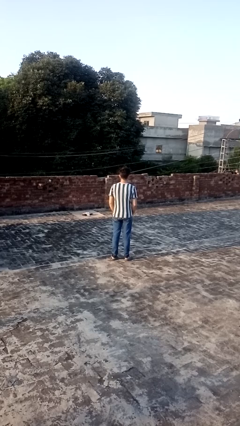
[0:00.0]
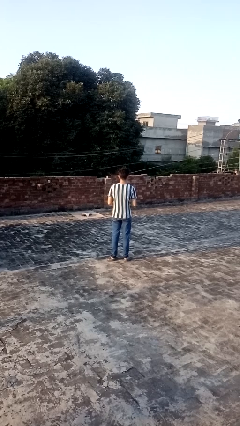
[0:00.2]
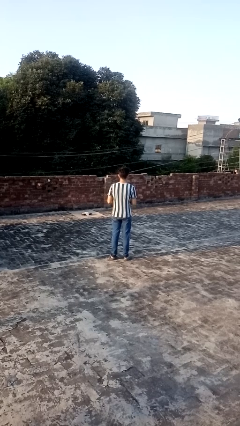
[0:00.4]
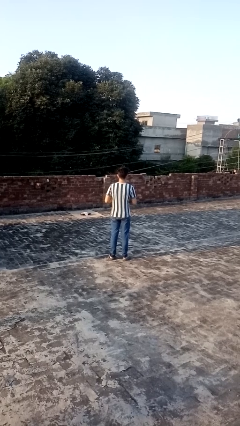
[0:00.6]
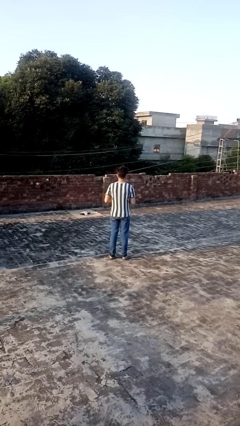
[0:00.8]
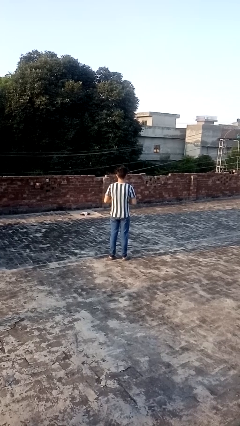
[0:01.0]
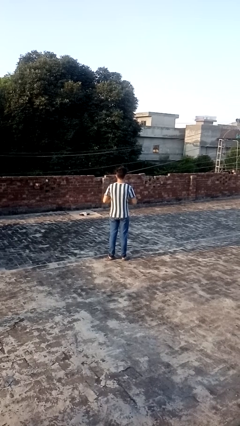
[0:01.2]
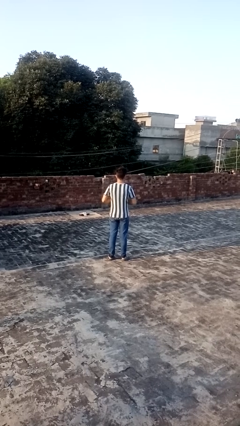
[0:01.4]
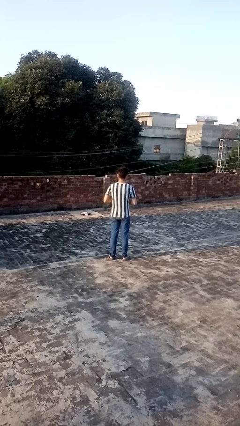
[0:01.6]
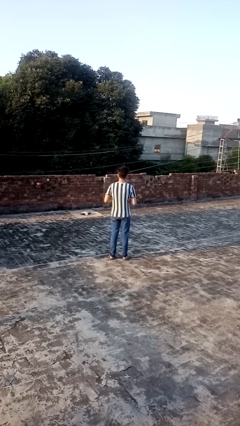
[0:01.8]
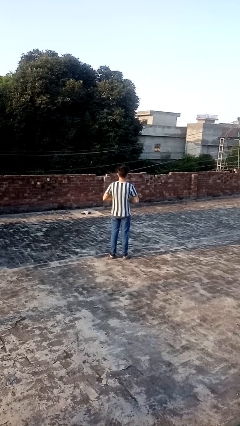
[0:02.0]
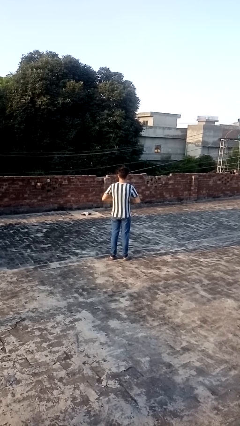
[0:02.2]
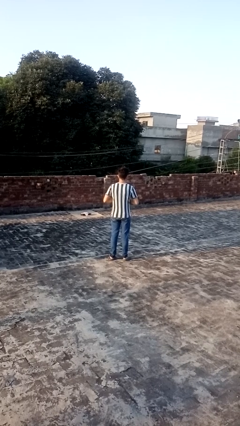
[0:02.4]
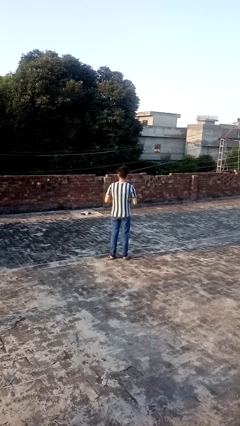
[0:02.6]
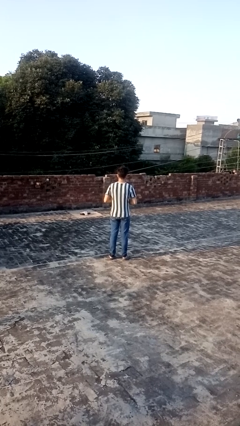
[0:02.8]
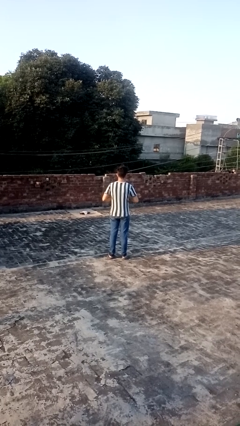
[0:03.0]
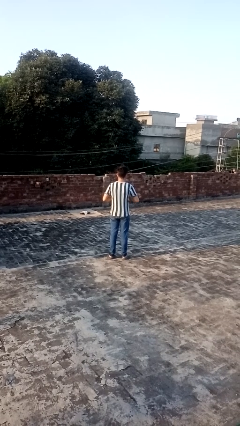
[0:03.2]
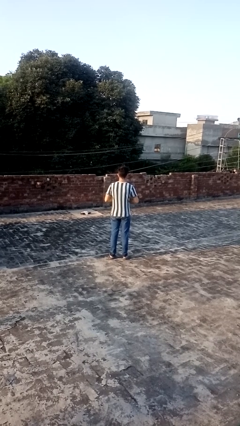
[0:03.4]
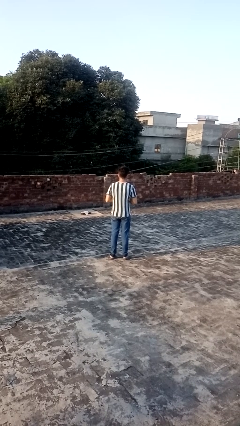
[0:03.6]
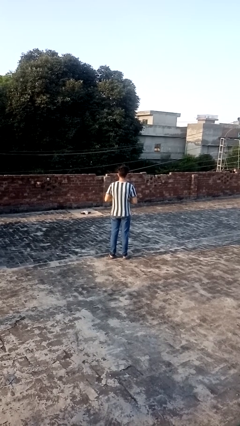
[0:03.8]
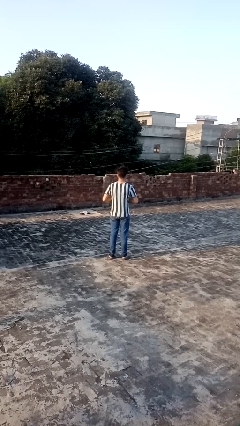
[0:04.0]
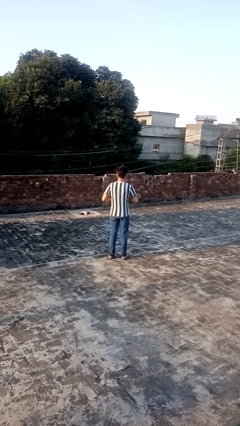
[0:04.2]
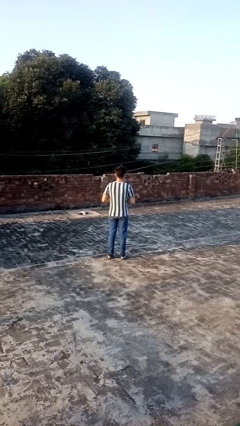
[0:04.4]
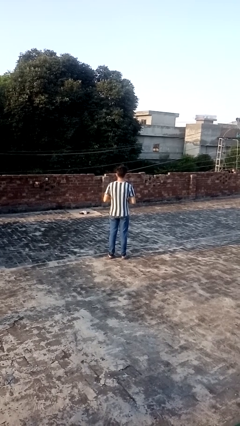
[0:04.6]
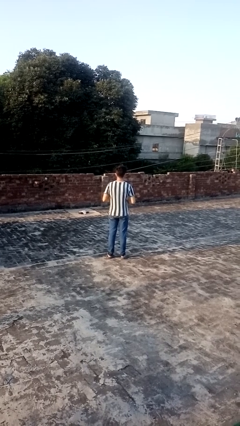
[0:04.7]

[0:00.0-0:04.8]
person cracks knuckles

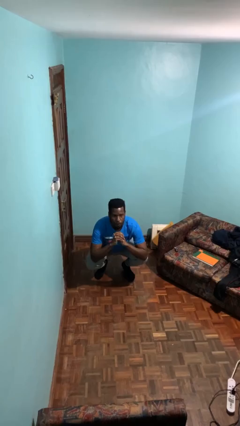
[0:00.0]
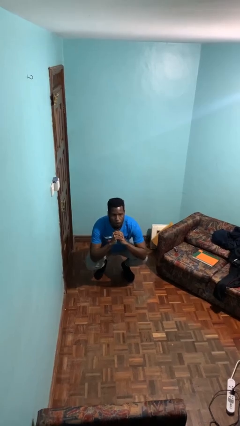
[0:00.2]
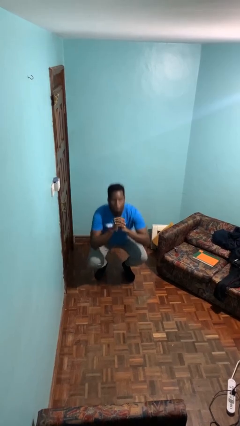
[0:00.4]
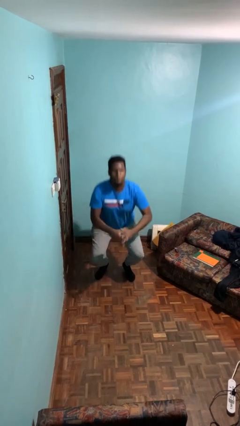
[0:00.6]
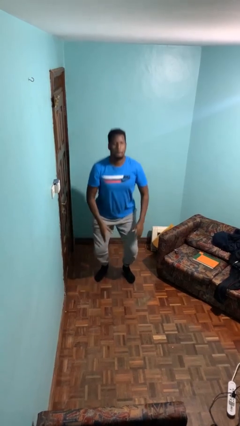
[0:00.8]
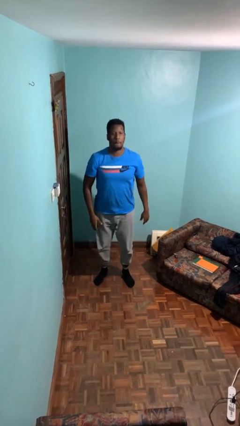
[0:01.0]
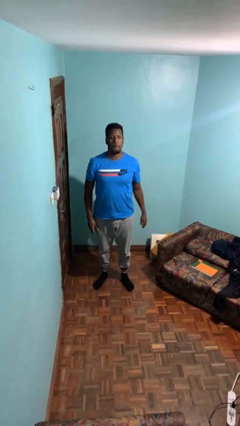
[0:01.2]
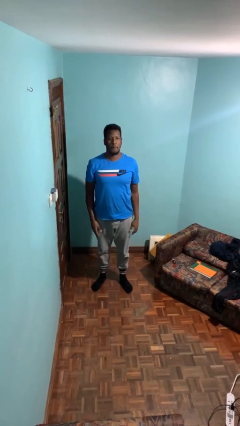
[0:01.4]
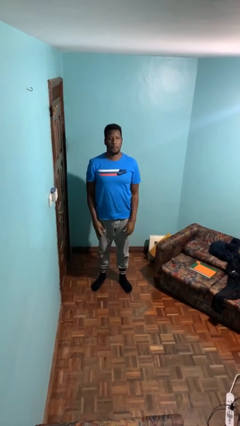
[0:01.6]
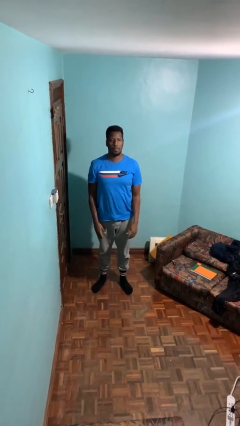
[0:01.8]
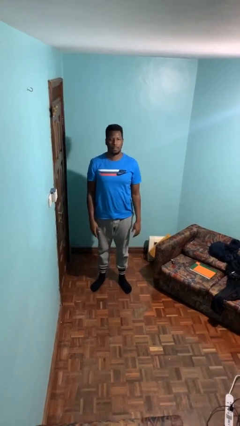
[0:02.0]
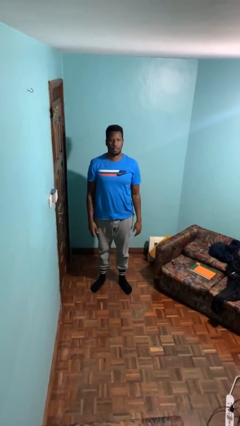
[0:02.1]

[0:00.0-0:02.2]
person stands up

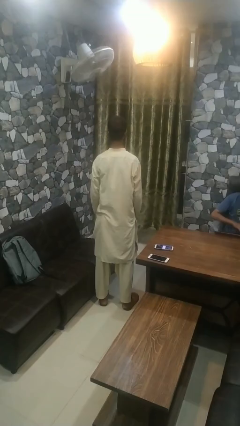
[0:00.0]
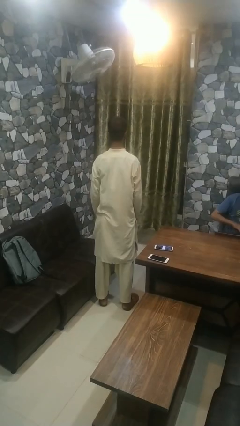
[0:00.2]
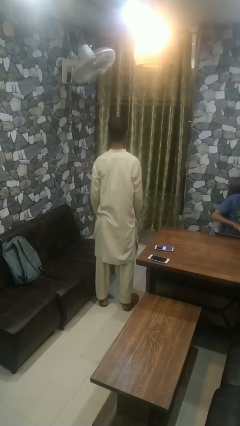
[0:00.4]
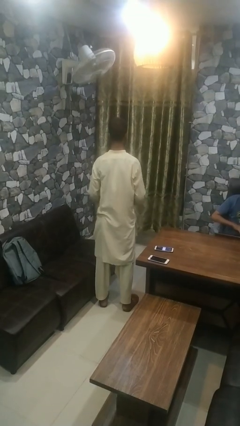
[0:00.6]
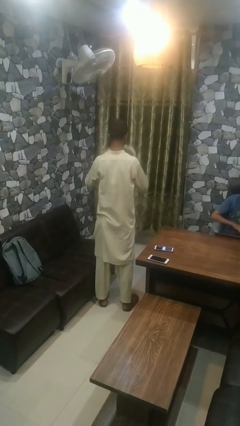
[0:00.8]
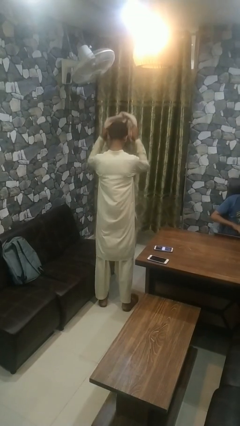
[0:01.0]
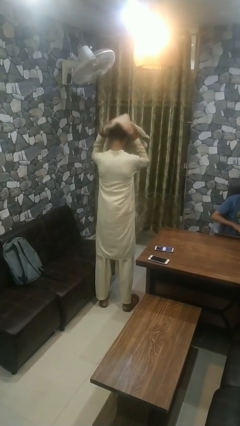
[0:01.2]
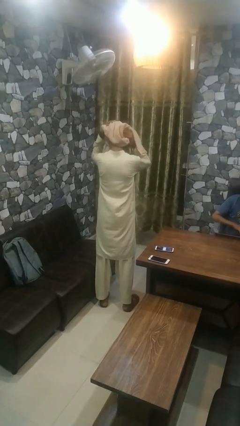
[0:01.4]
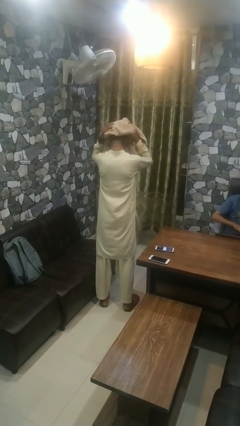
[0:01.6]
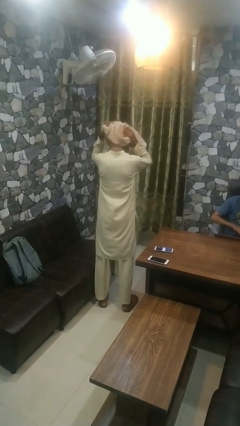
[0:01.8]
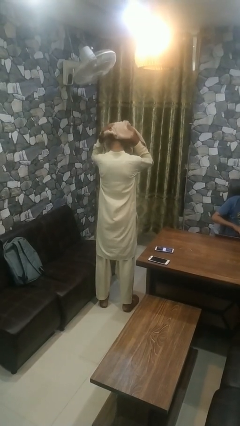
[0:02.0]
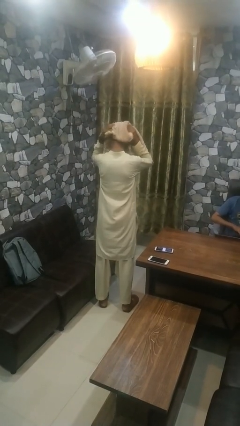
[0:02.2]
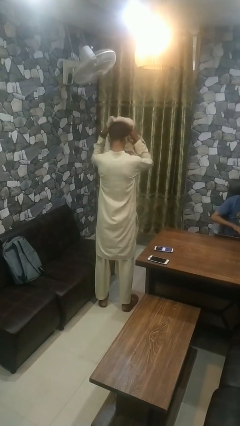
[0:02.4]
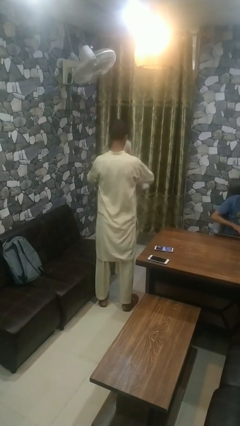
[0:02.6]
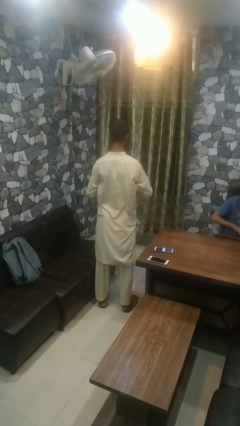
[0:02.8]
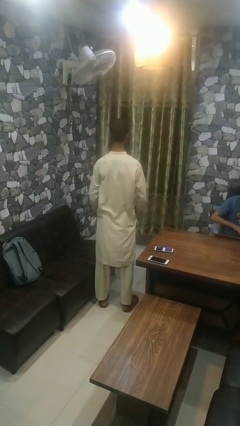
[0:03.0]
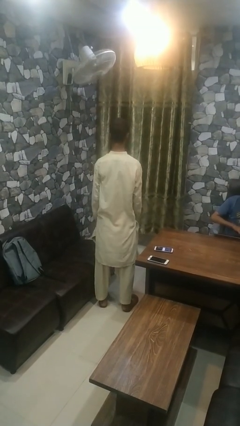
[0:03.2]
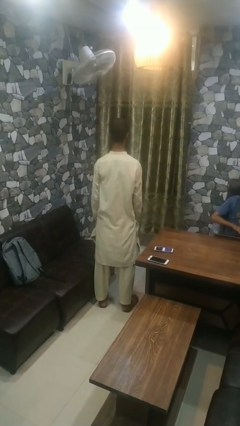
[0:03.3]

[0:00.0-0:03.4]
person dries hair with towel

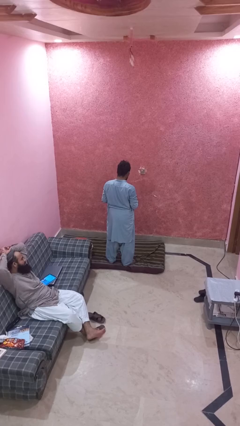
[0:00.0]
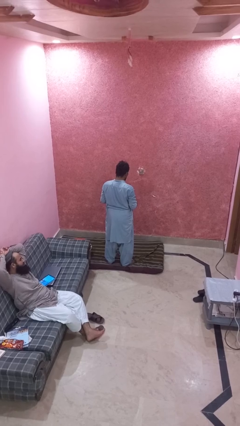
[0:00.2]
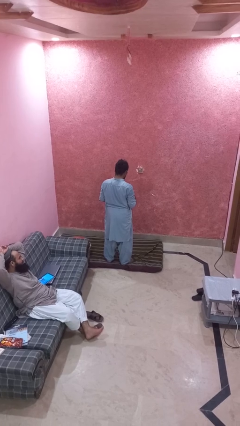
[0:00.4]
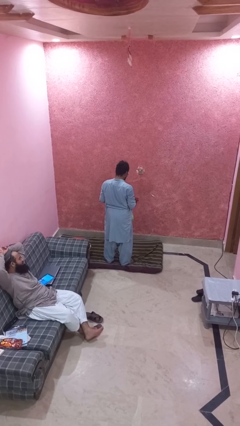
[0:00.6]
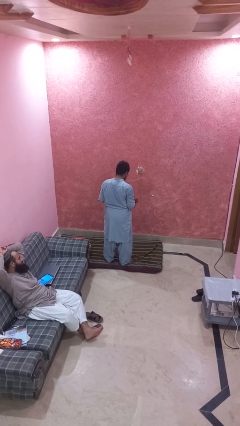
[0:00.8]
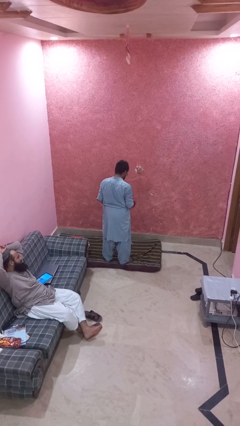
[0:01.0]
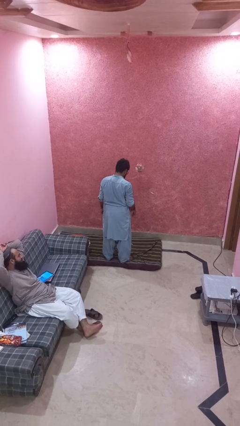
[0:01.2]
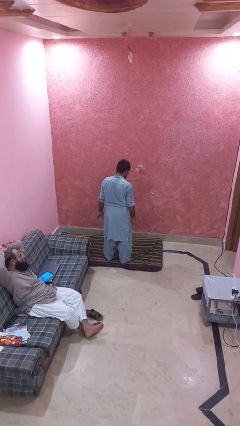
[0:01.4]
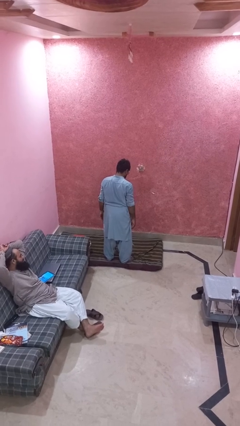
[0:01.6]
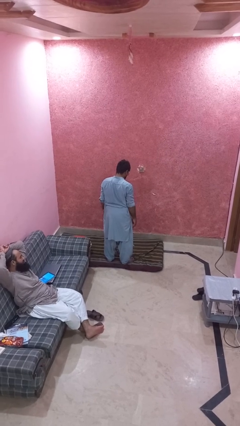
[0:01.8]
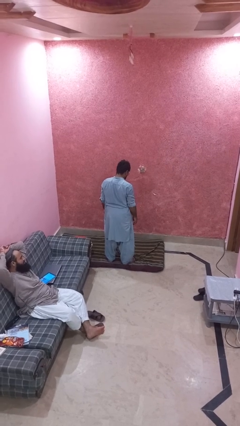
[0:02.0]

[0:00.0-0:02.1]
person drops object

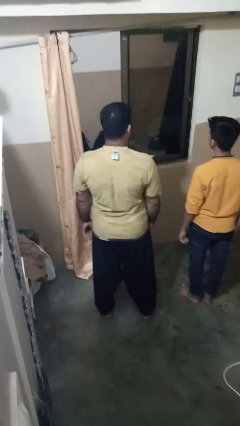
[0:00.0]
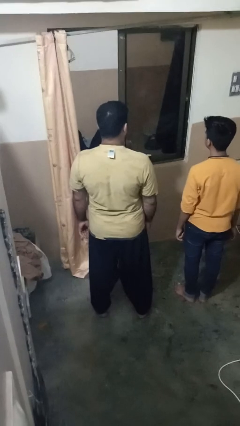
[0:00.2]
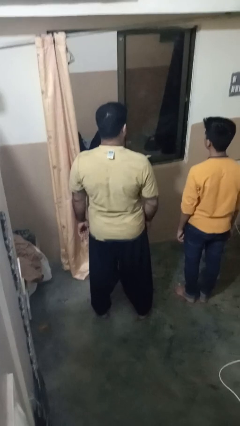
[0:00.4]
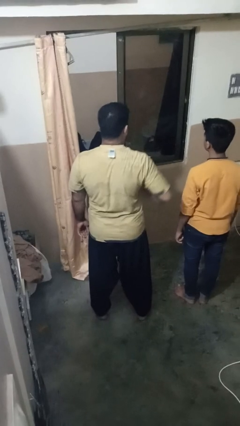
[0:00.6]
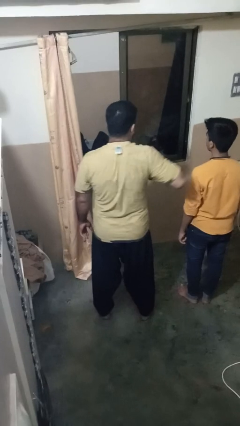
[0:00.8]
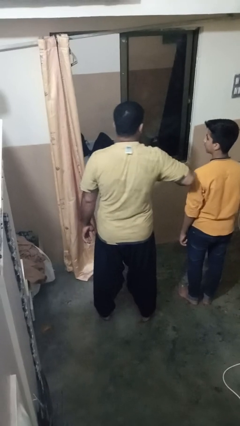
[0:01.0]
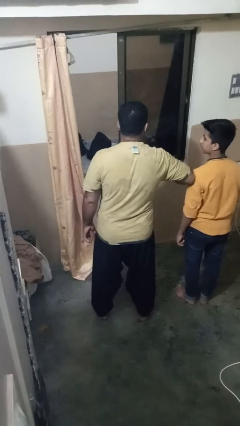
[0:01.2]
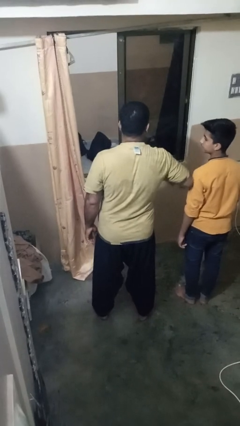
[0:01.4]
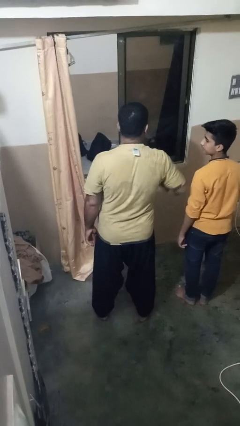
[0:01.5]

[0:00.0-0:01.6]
person nudges person with elbow

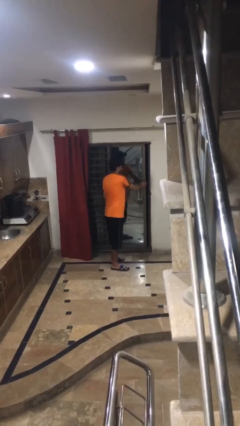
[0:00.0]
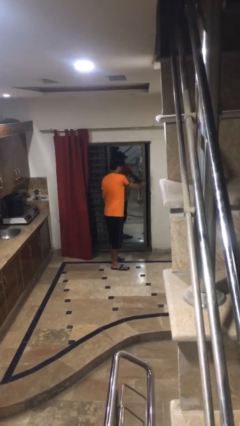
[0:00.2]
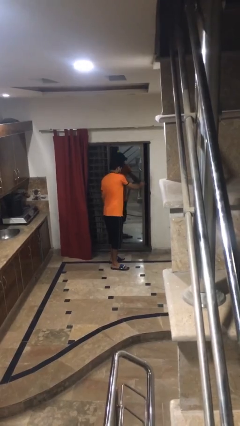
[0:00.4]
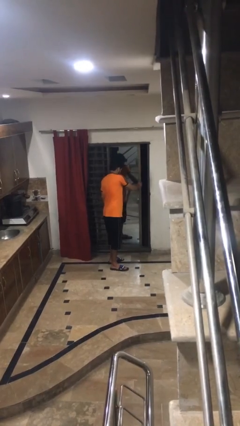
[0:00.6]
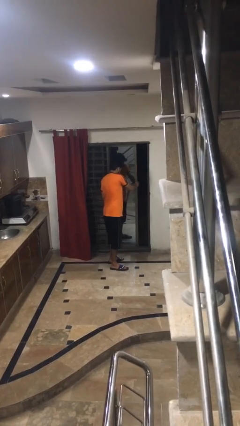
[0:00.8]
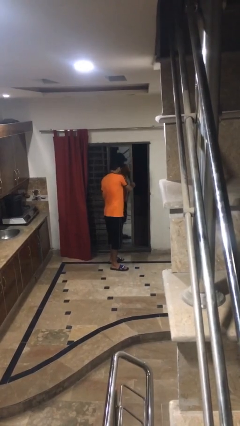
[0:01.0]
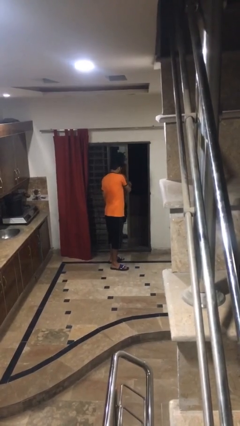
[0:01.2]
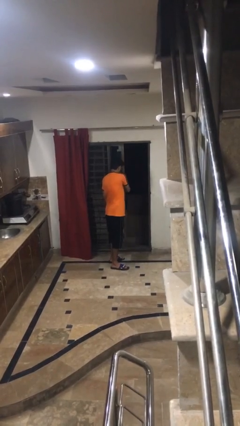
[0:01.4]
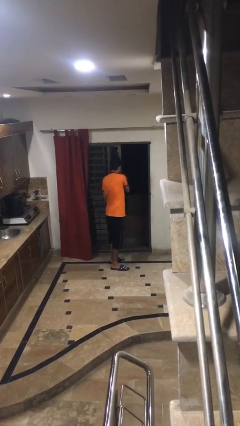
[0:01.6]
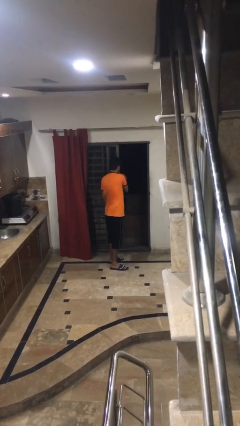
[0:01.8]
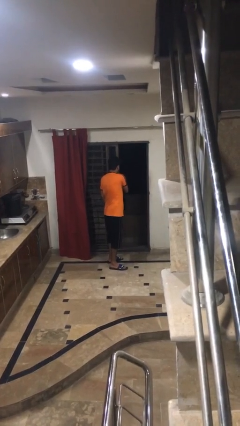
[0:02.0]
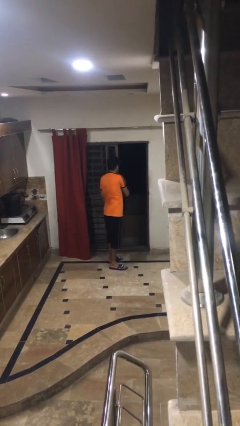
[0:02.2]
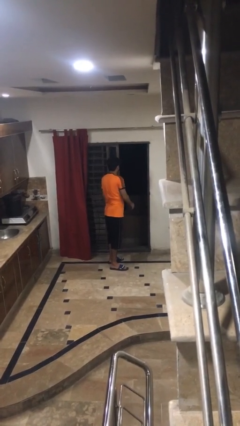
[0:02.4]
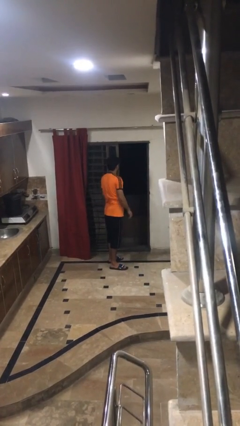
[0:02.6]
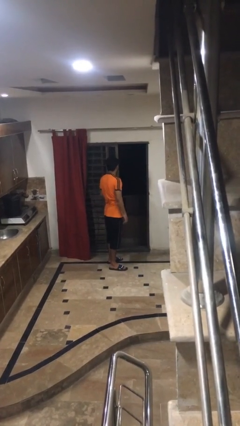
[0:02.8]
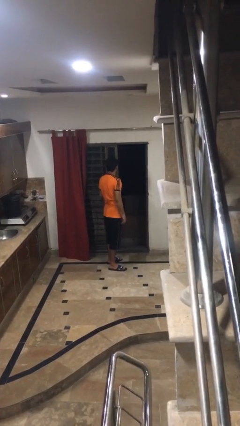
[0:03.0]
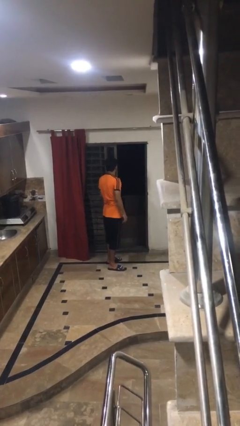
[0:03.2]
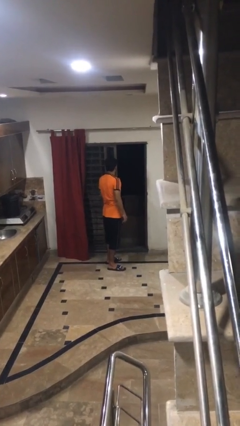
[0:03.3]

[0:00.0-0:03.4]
person opens sliding door

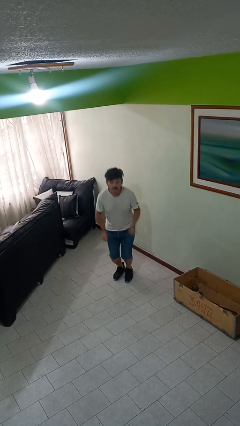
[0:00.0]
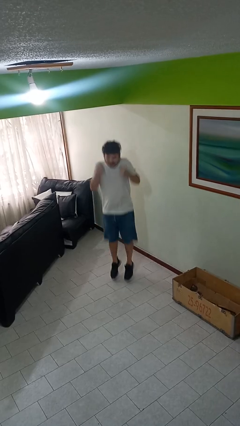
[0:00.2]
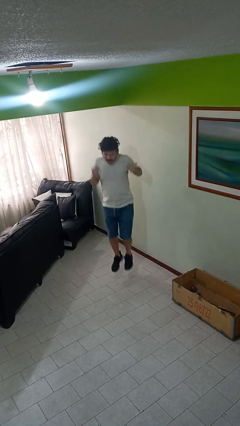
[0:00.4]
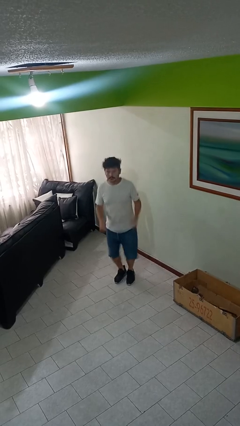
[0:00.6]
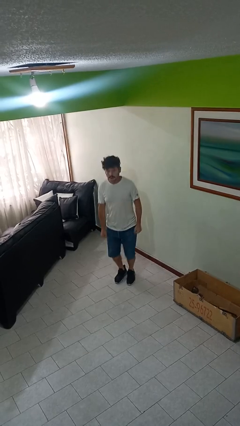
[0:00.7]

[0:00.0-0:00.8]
person jumps
